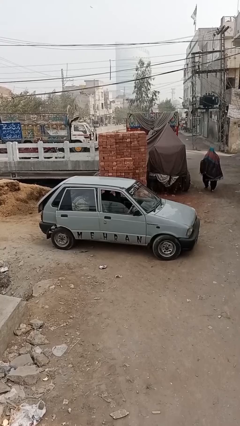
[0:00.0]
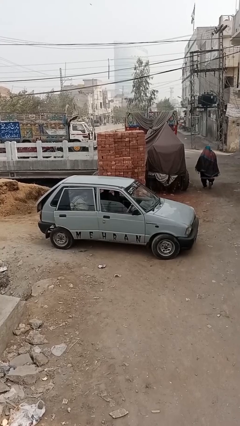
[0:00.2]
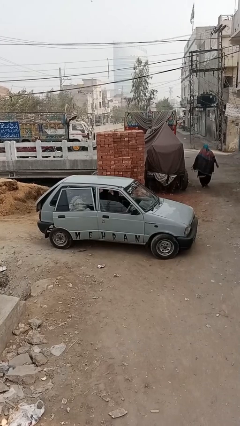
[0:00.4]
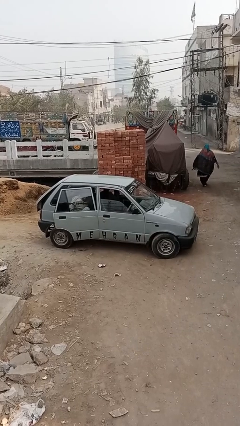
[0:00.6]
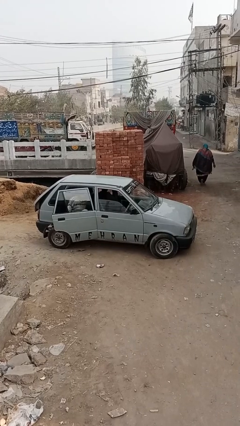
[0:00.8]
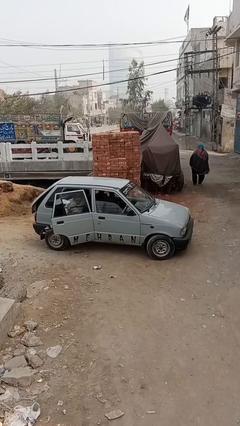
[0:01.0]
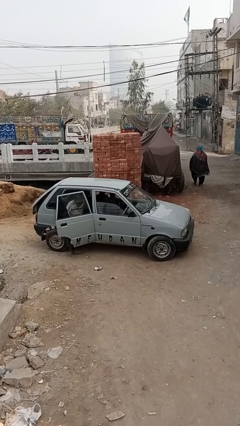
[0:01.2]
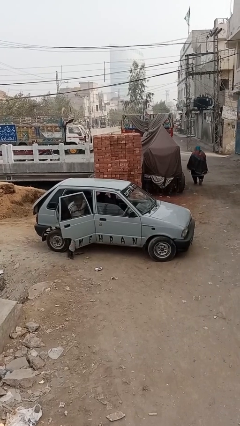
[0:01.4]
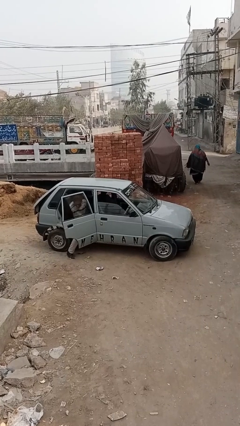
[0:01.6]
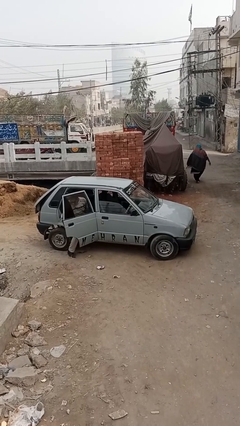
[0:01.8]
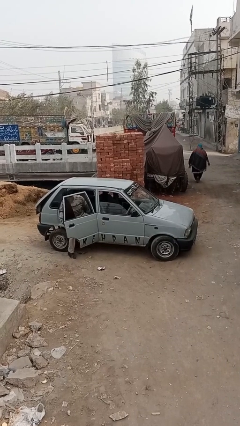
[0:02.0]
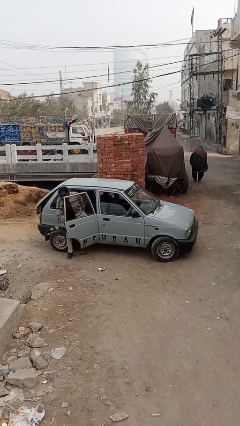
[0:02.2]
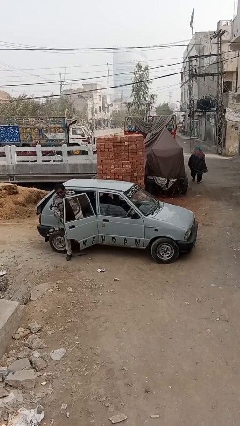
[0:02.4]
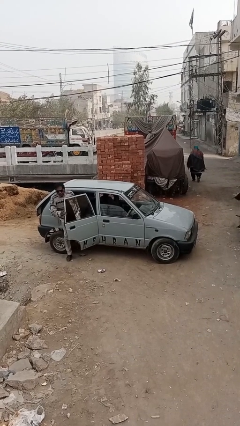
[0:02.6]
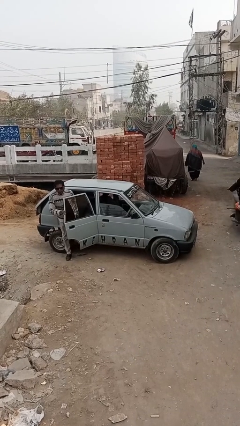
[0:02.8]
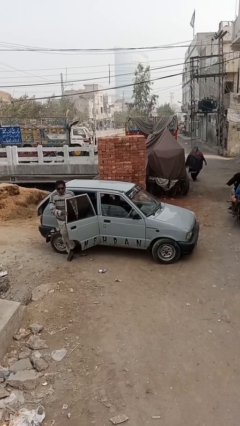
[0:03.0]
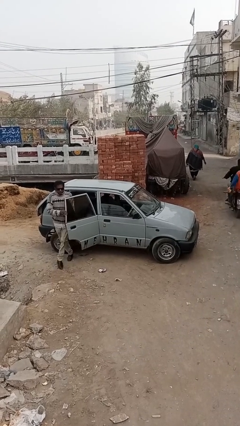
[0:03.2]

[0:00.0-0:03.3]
car drops off person

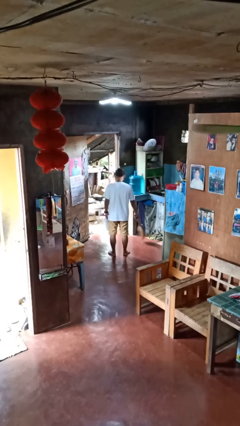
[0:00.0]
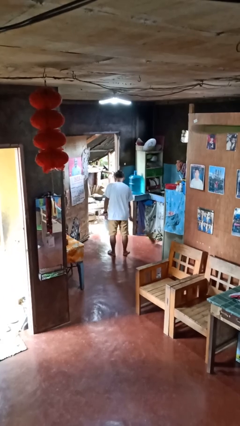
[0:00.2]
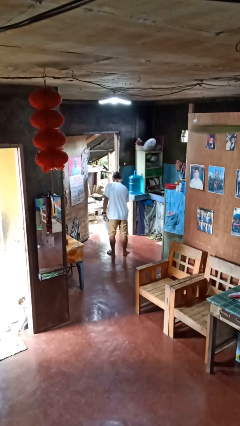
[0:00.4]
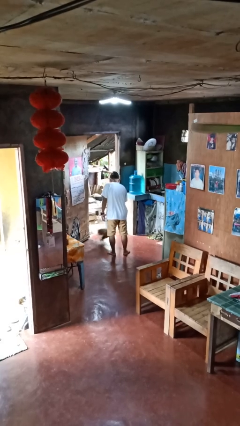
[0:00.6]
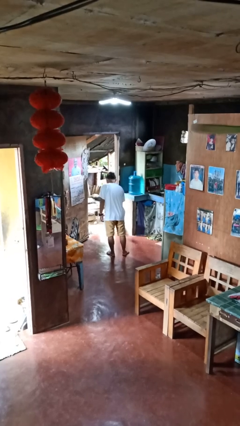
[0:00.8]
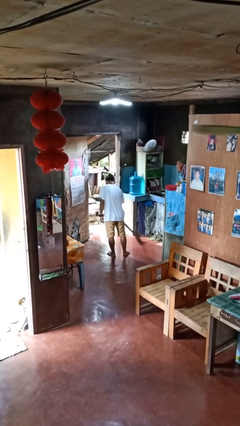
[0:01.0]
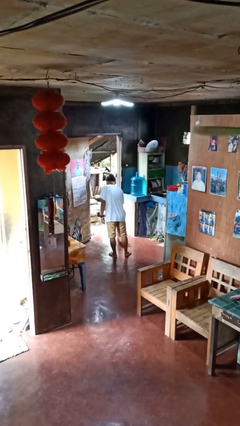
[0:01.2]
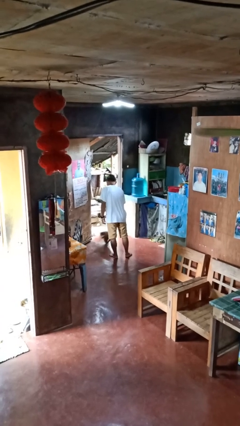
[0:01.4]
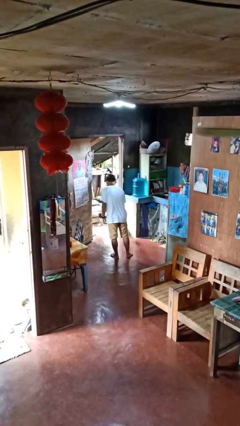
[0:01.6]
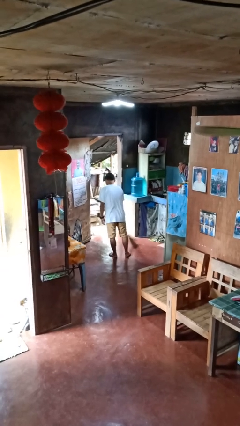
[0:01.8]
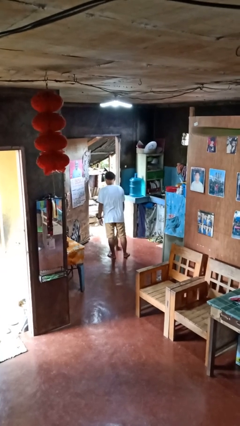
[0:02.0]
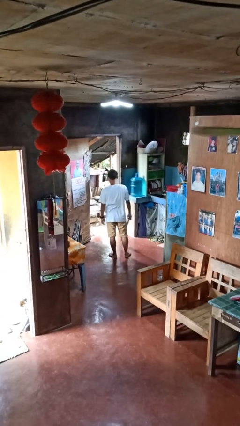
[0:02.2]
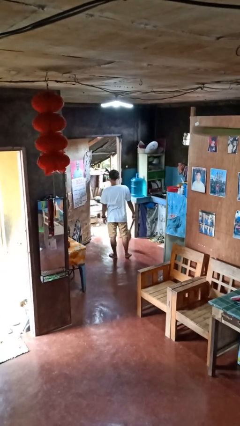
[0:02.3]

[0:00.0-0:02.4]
person sweeps floor

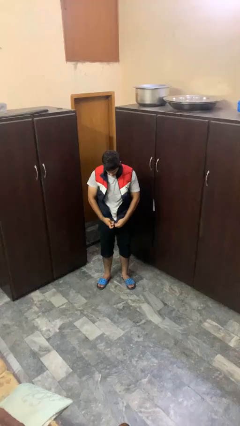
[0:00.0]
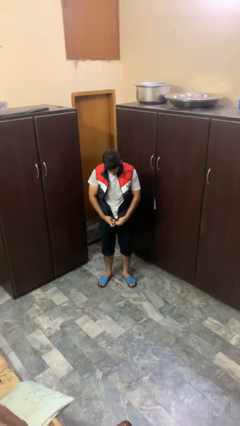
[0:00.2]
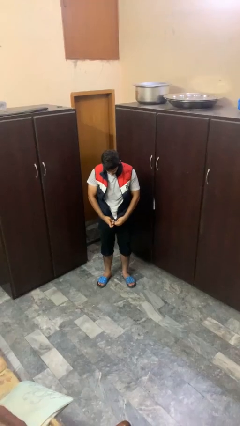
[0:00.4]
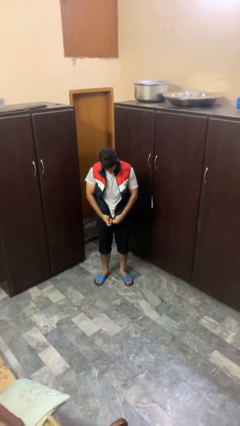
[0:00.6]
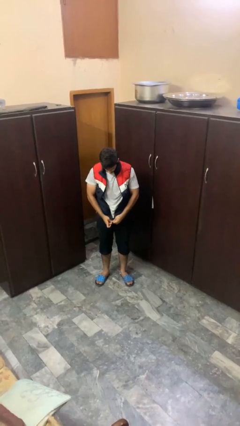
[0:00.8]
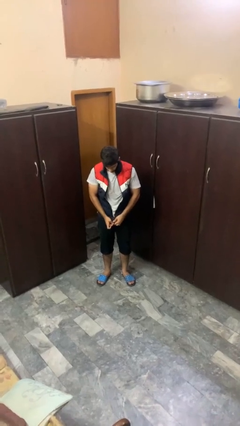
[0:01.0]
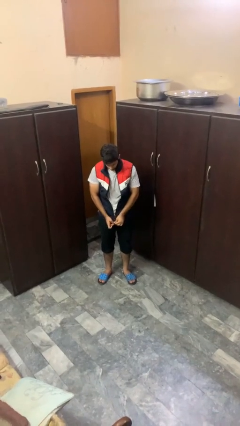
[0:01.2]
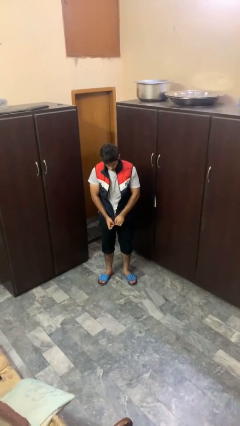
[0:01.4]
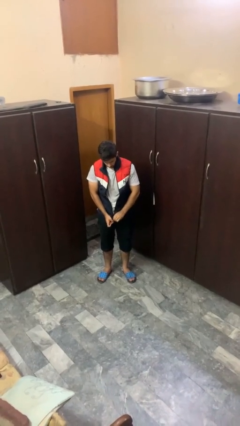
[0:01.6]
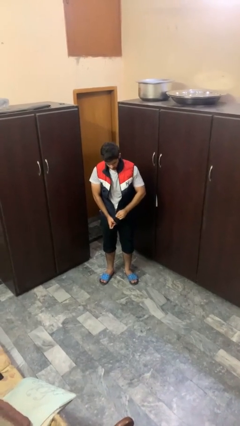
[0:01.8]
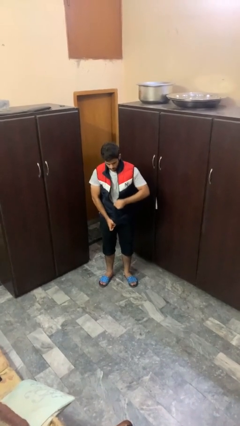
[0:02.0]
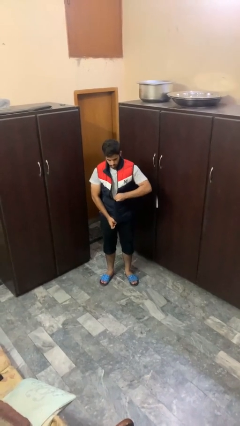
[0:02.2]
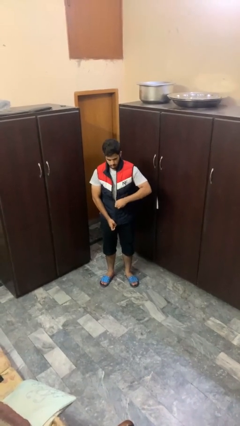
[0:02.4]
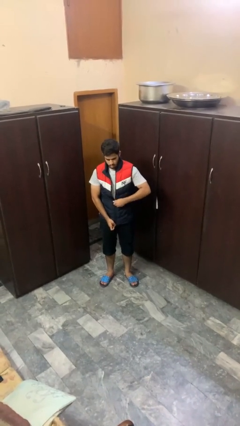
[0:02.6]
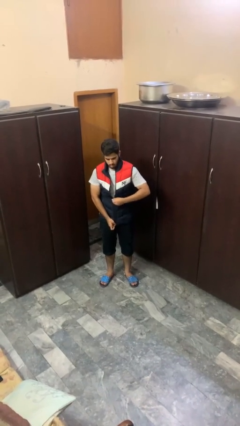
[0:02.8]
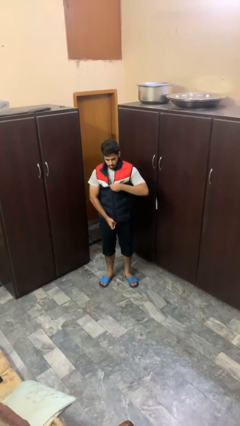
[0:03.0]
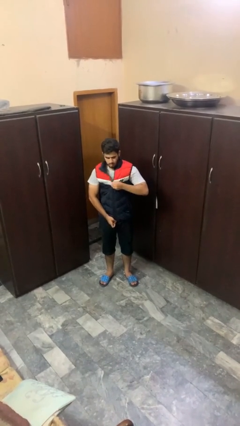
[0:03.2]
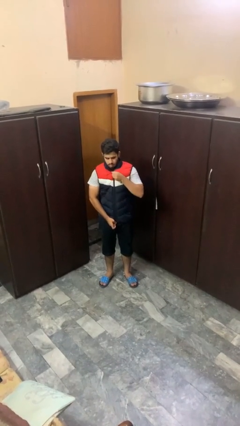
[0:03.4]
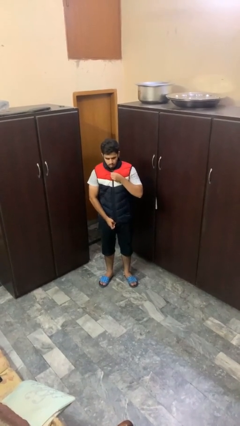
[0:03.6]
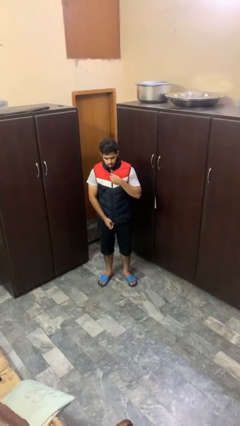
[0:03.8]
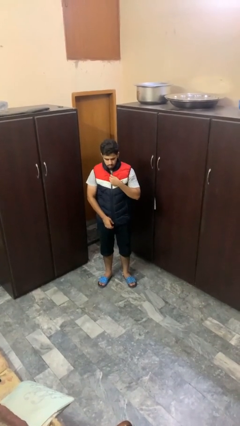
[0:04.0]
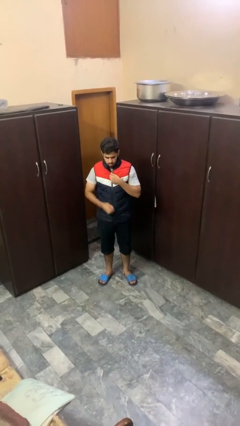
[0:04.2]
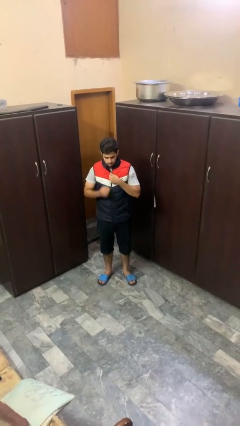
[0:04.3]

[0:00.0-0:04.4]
person zips up jacket

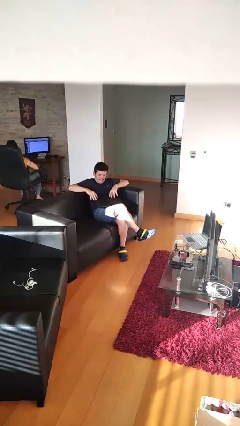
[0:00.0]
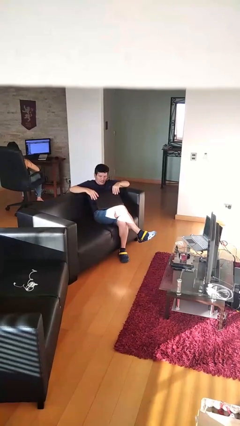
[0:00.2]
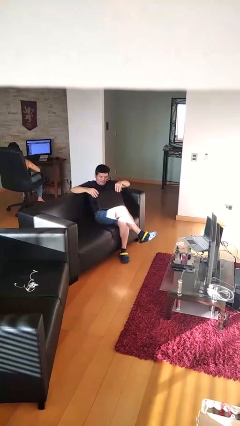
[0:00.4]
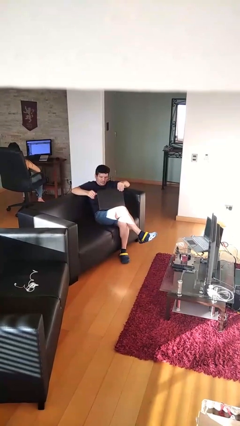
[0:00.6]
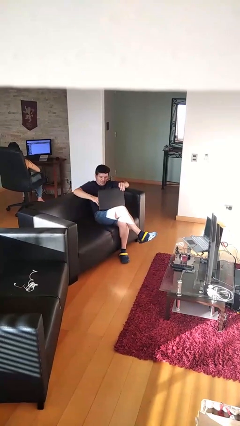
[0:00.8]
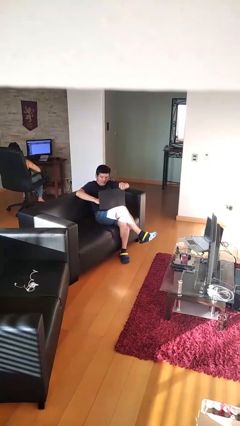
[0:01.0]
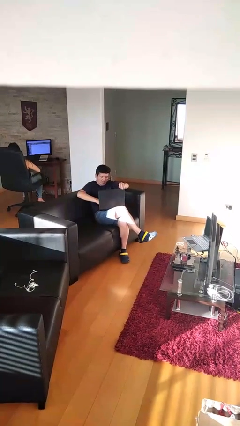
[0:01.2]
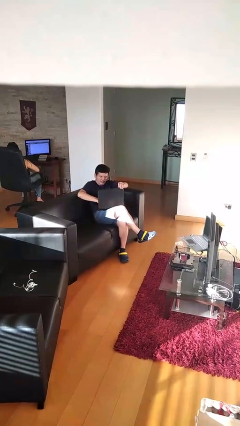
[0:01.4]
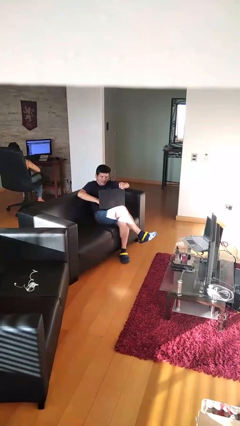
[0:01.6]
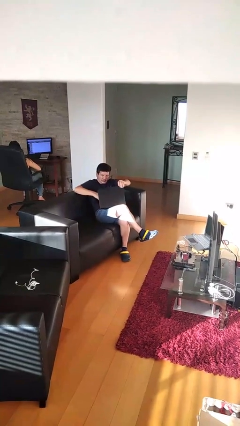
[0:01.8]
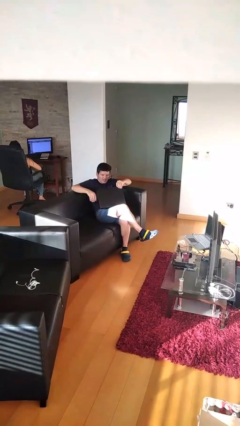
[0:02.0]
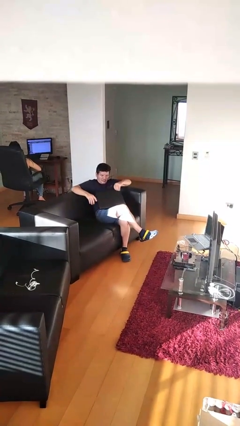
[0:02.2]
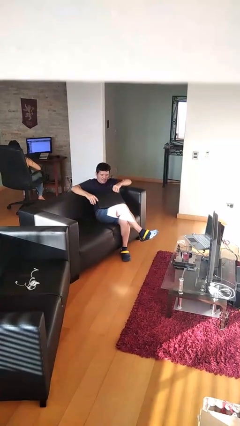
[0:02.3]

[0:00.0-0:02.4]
person interacts with laptop

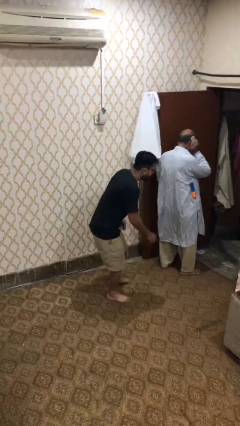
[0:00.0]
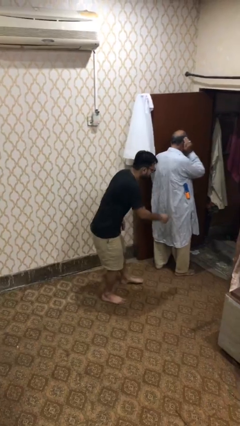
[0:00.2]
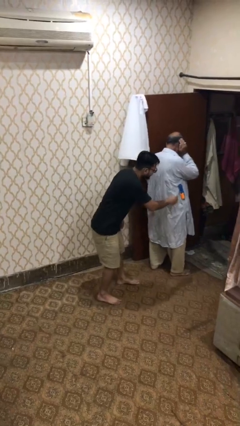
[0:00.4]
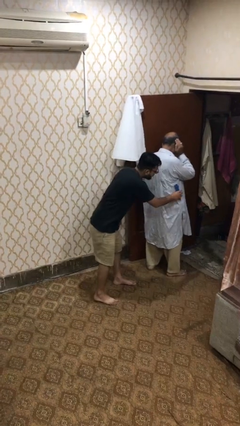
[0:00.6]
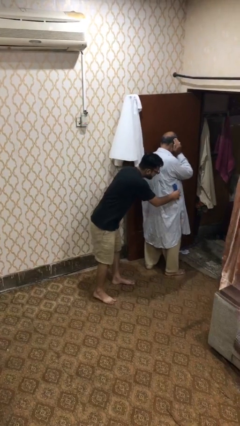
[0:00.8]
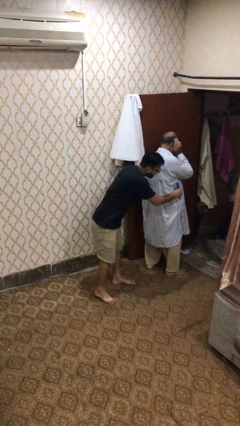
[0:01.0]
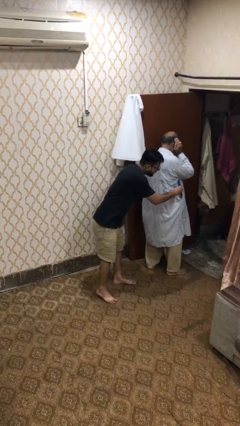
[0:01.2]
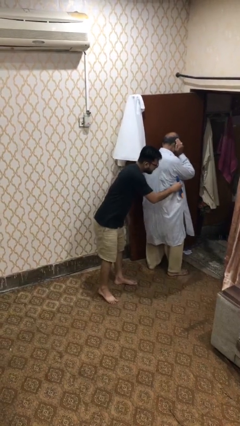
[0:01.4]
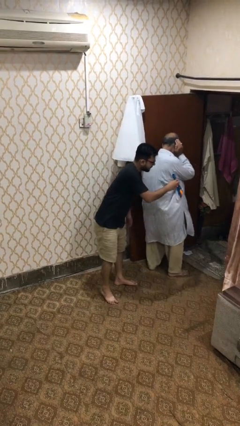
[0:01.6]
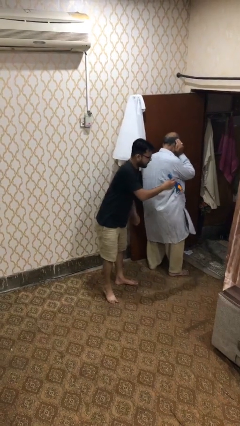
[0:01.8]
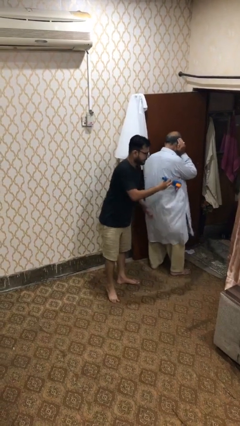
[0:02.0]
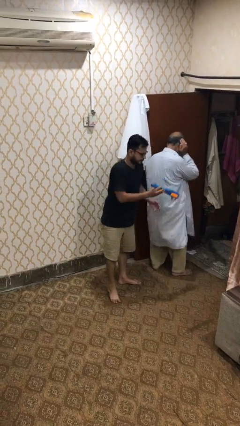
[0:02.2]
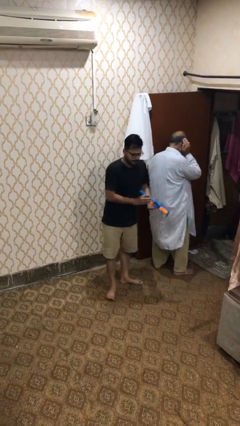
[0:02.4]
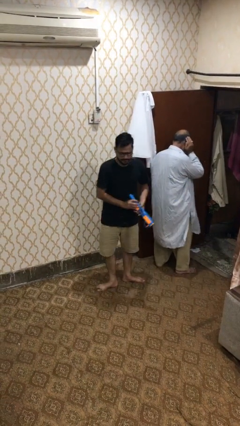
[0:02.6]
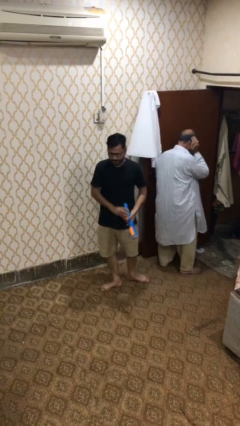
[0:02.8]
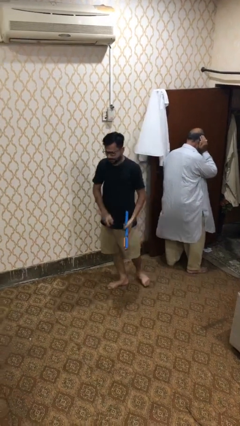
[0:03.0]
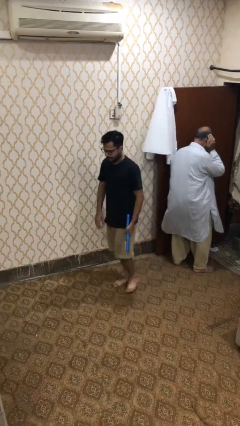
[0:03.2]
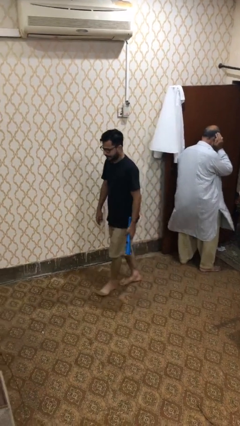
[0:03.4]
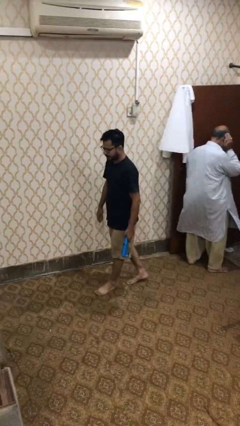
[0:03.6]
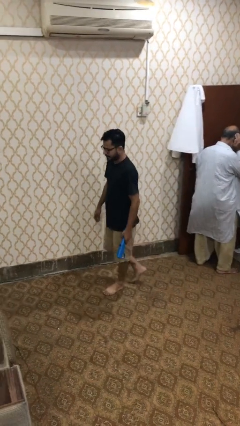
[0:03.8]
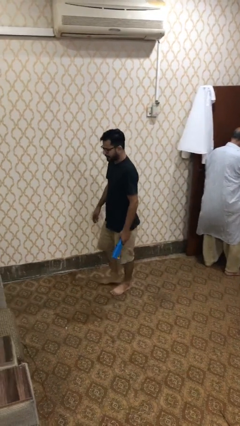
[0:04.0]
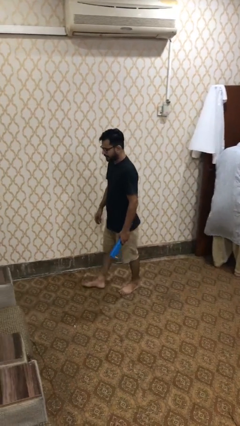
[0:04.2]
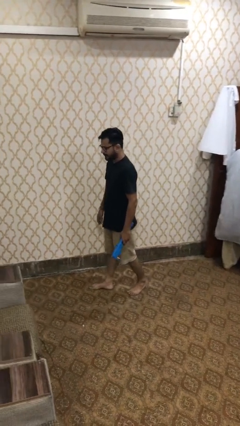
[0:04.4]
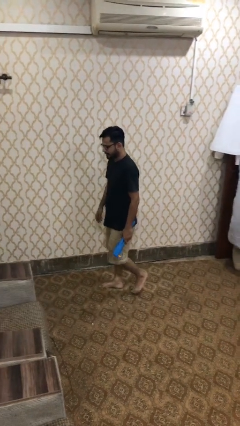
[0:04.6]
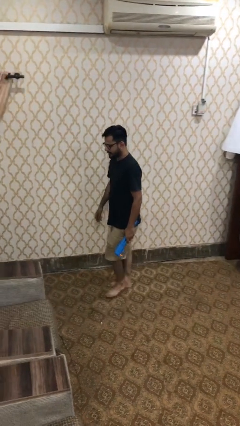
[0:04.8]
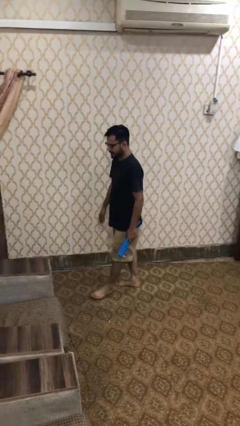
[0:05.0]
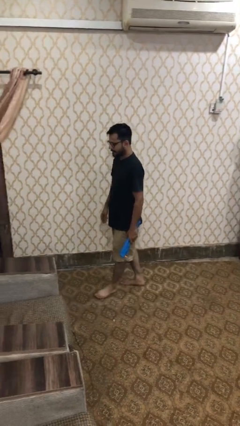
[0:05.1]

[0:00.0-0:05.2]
person steals object from person
